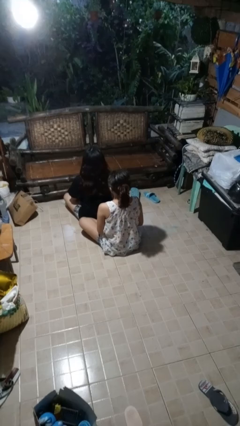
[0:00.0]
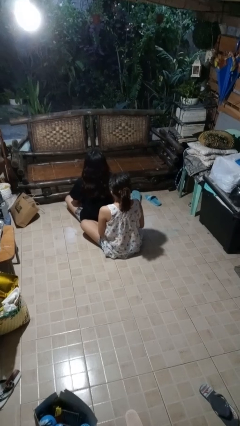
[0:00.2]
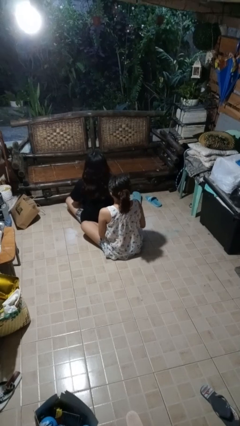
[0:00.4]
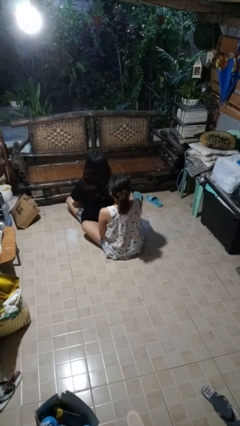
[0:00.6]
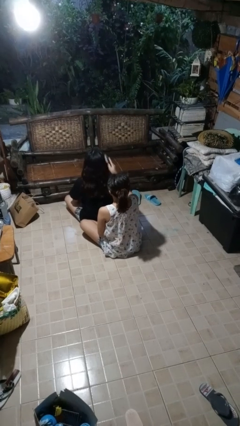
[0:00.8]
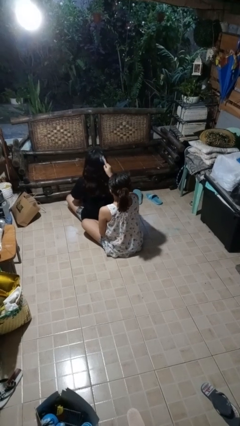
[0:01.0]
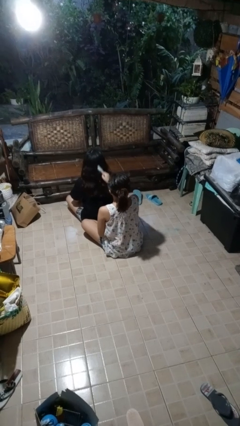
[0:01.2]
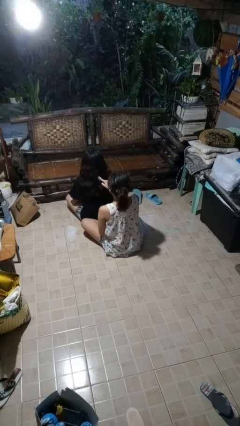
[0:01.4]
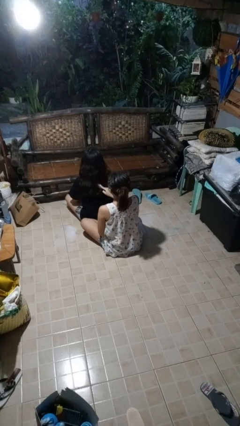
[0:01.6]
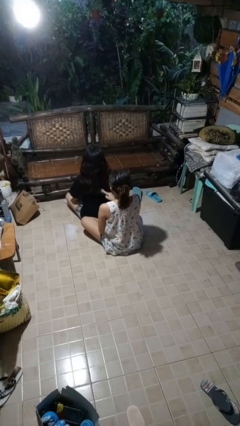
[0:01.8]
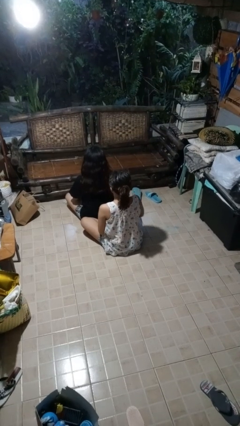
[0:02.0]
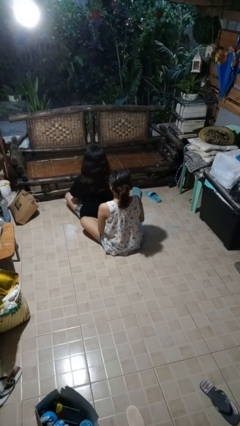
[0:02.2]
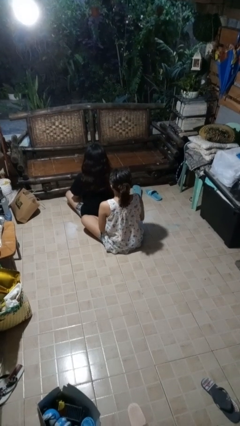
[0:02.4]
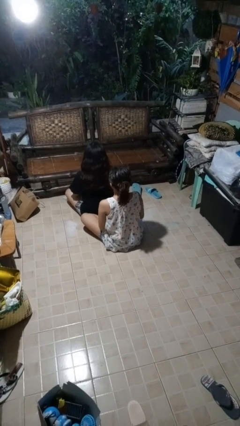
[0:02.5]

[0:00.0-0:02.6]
person brushes hair of person

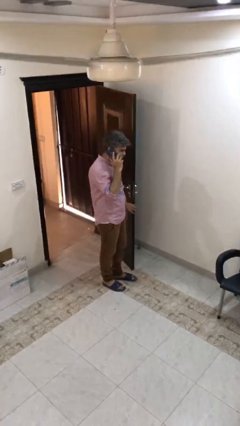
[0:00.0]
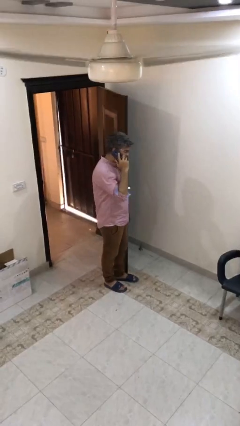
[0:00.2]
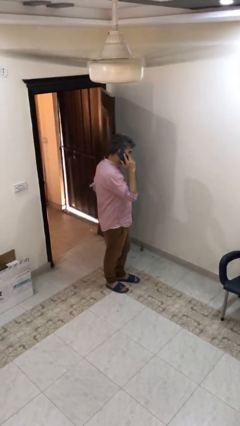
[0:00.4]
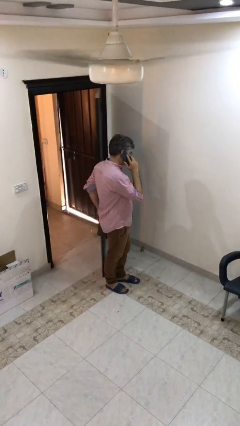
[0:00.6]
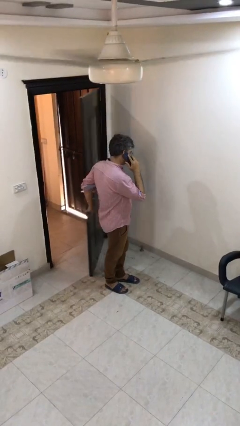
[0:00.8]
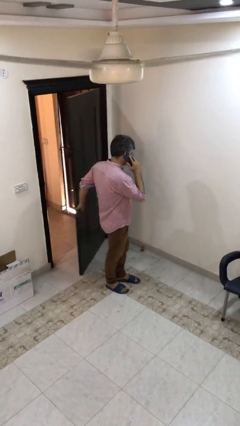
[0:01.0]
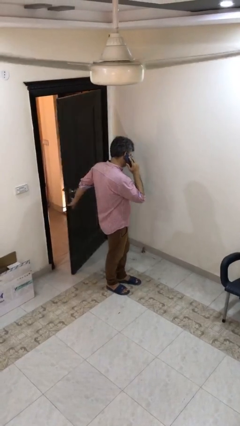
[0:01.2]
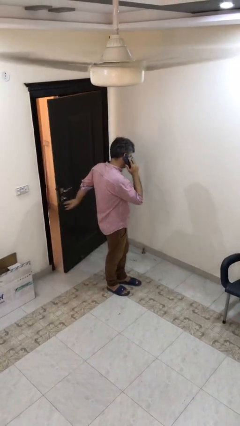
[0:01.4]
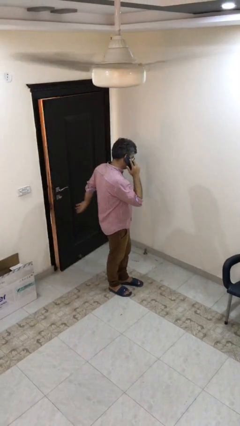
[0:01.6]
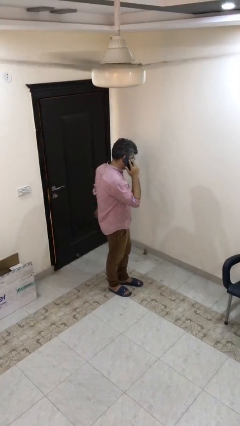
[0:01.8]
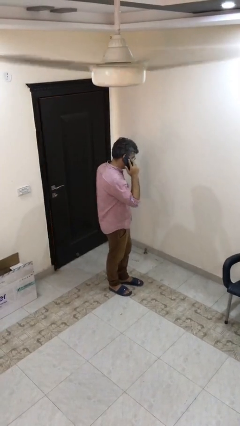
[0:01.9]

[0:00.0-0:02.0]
person closes facility door

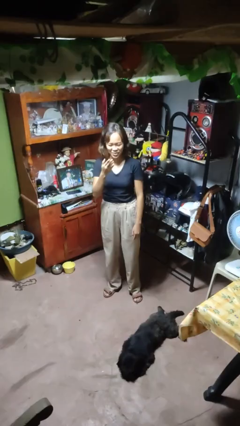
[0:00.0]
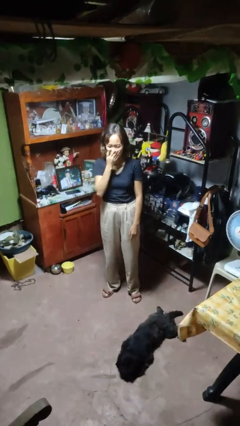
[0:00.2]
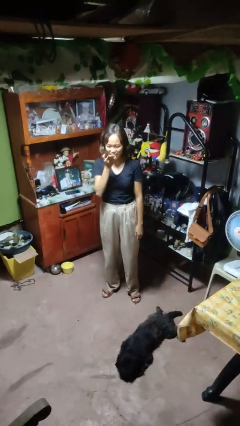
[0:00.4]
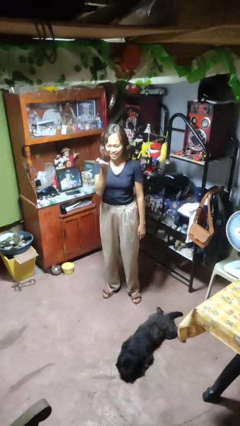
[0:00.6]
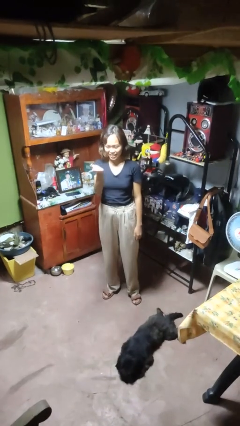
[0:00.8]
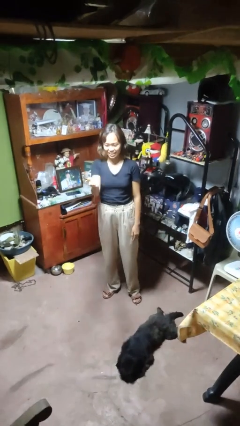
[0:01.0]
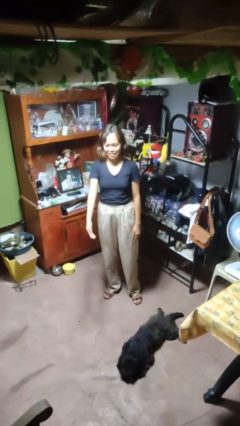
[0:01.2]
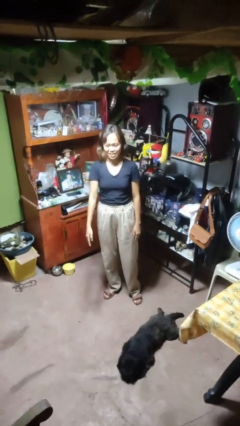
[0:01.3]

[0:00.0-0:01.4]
person gestures blow kiss

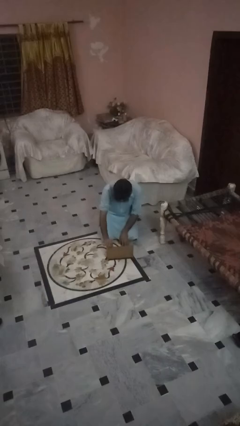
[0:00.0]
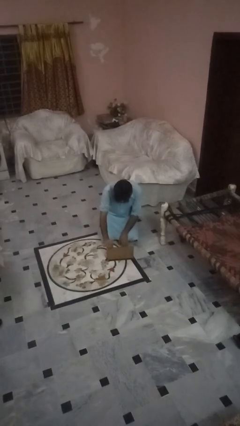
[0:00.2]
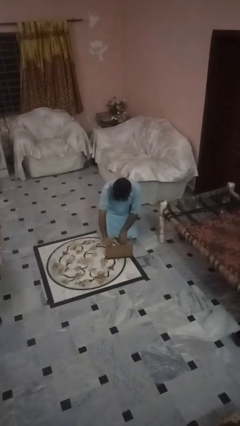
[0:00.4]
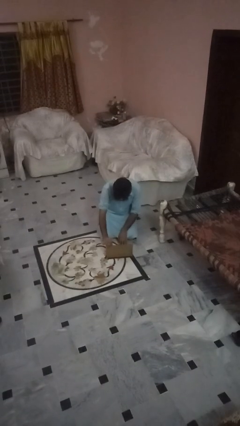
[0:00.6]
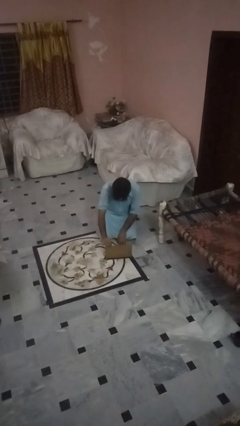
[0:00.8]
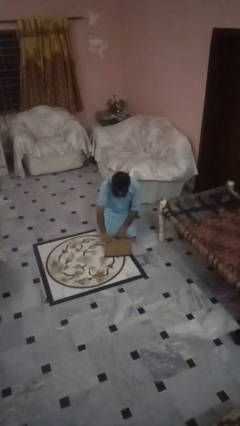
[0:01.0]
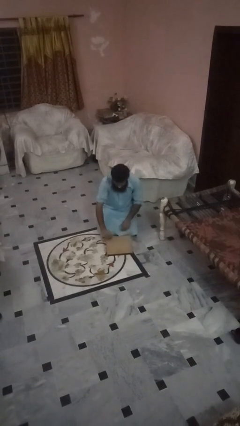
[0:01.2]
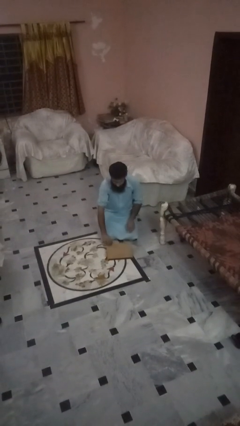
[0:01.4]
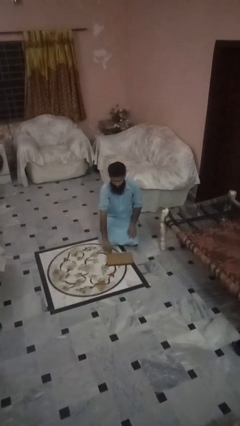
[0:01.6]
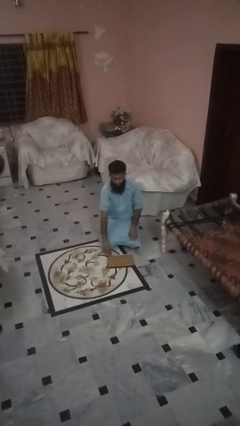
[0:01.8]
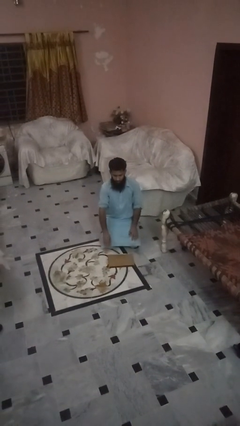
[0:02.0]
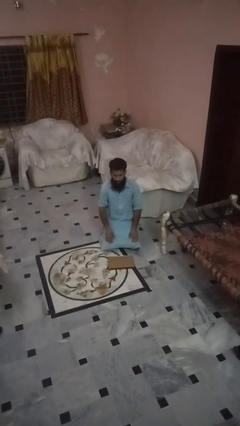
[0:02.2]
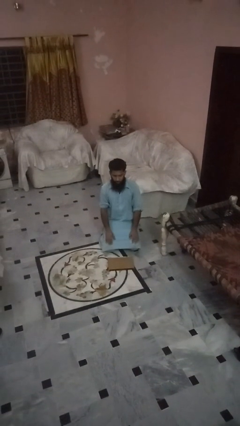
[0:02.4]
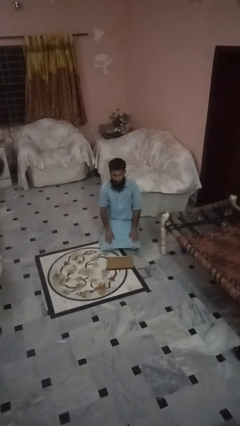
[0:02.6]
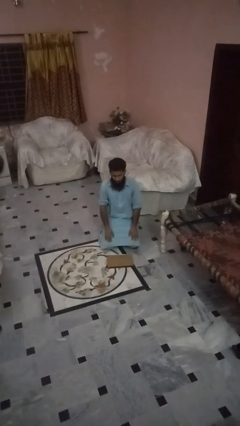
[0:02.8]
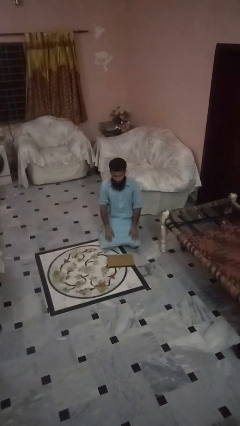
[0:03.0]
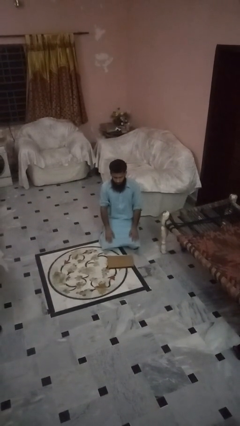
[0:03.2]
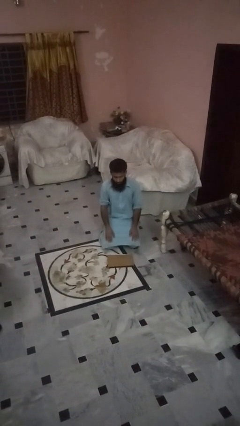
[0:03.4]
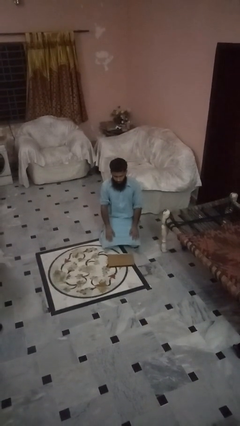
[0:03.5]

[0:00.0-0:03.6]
person closes laptop

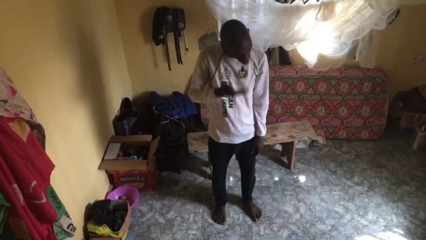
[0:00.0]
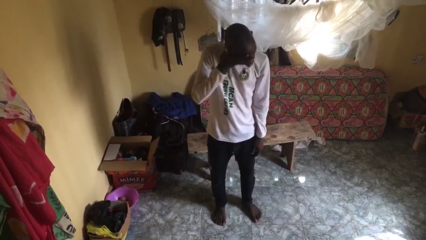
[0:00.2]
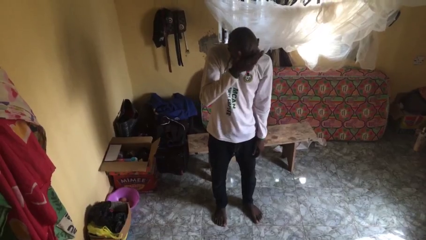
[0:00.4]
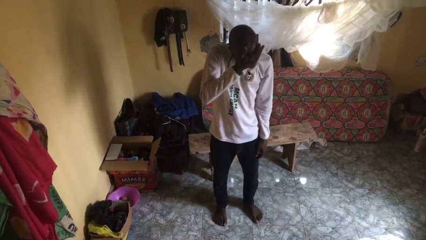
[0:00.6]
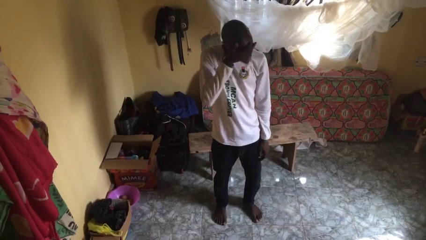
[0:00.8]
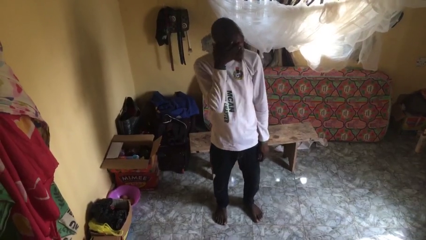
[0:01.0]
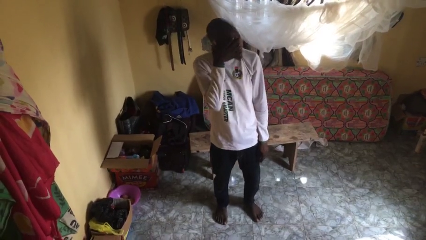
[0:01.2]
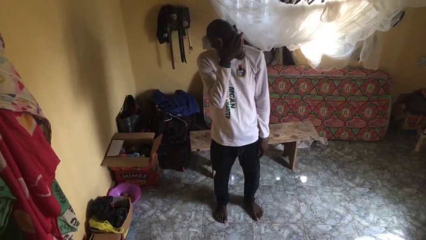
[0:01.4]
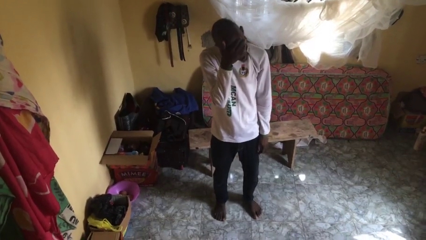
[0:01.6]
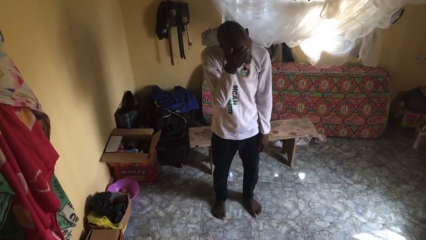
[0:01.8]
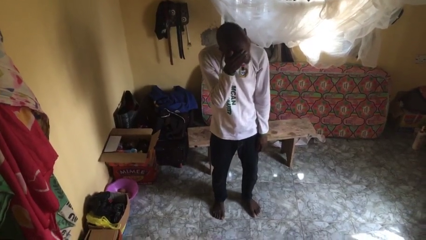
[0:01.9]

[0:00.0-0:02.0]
person rubs eyes

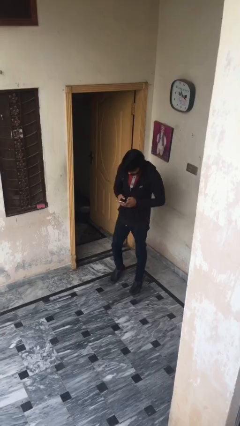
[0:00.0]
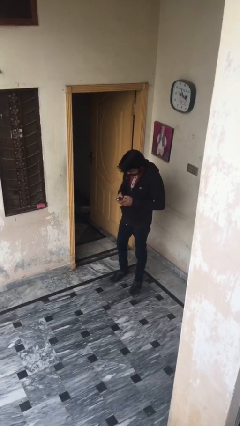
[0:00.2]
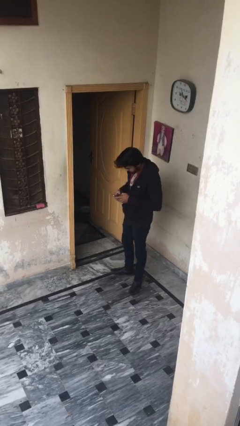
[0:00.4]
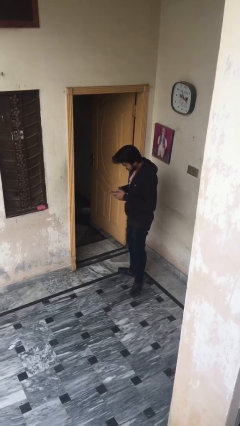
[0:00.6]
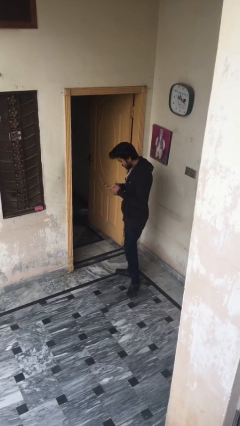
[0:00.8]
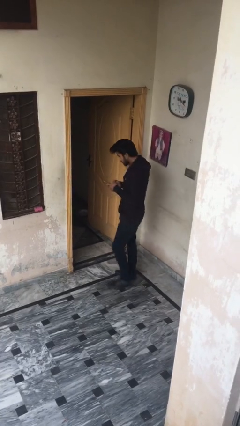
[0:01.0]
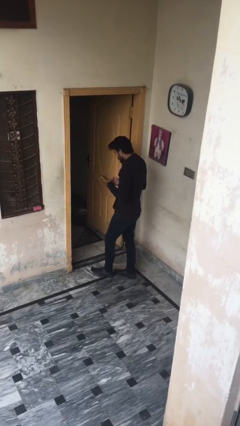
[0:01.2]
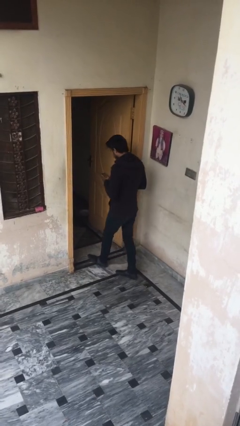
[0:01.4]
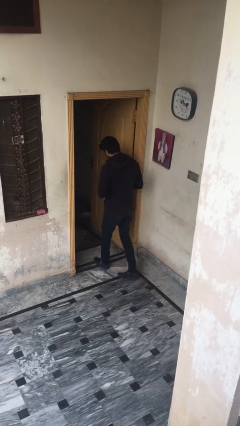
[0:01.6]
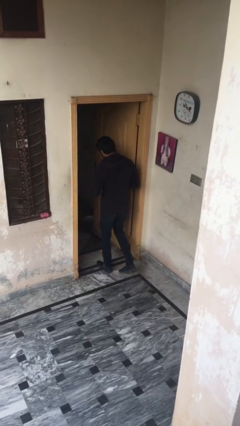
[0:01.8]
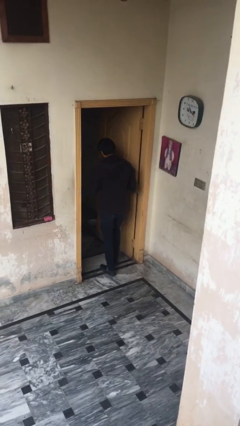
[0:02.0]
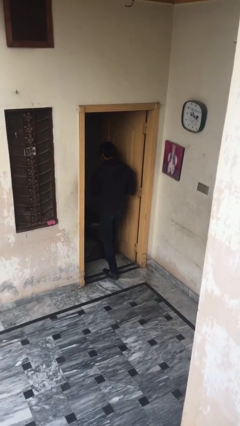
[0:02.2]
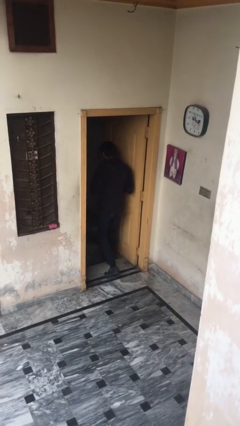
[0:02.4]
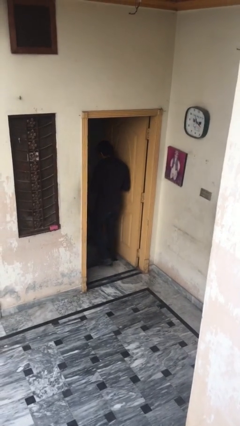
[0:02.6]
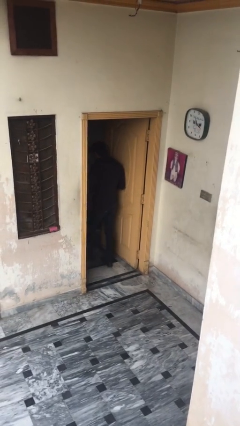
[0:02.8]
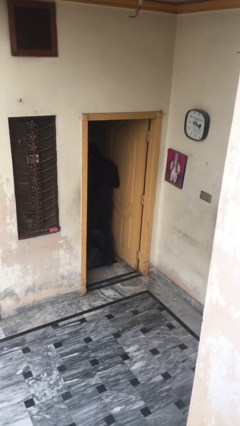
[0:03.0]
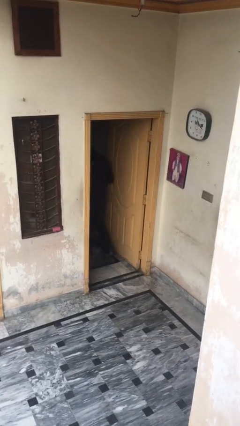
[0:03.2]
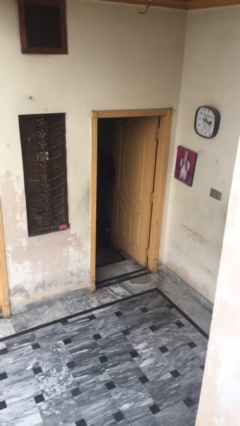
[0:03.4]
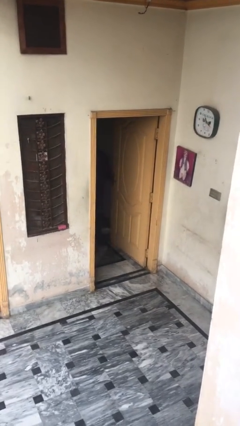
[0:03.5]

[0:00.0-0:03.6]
person exits scene through structure

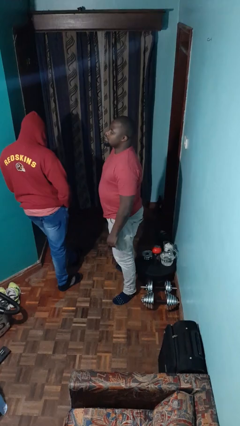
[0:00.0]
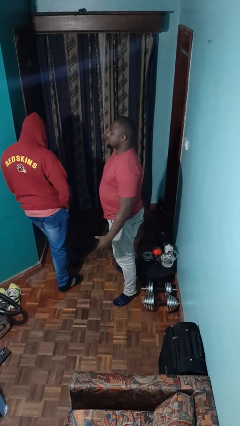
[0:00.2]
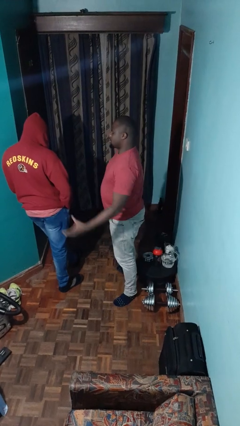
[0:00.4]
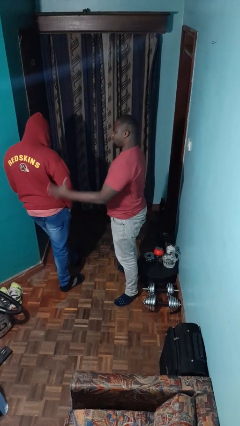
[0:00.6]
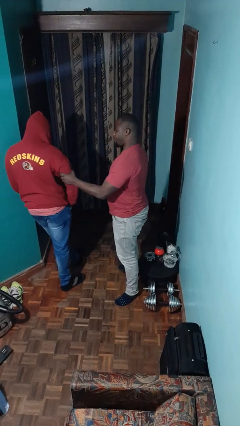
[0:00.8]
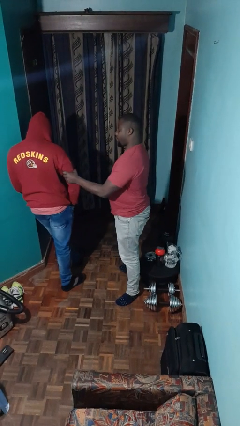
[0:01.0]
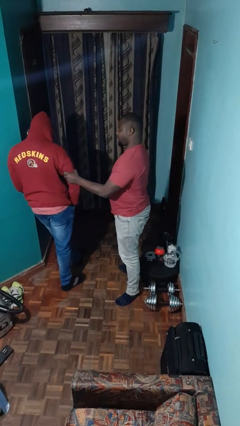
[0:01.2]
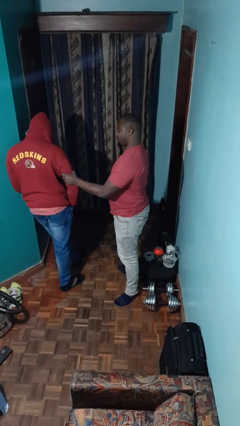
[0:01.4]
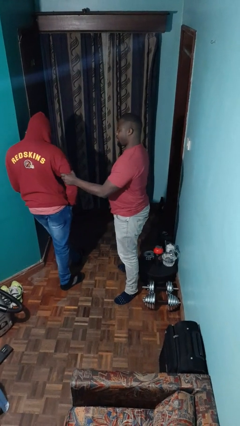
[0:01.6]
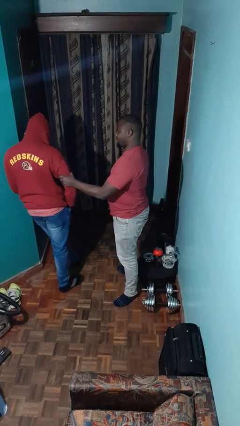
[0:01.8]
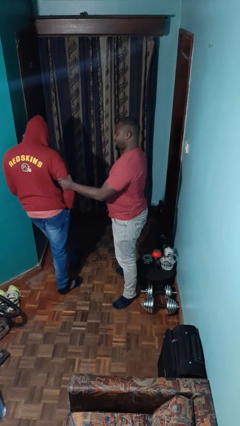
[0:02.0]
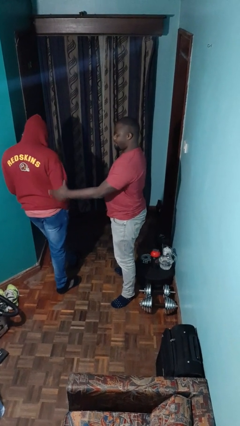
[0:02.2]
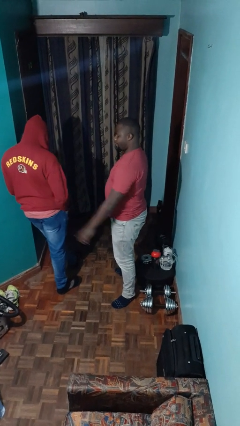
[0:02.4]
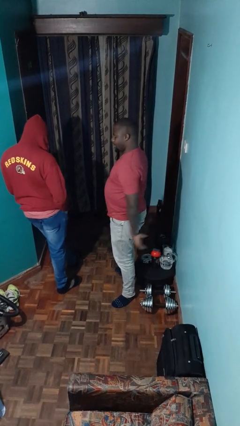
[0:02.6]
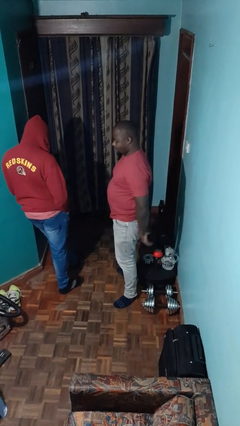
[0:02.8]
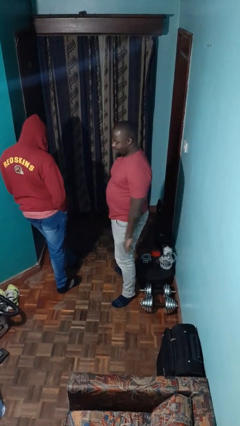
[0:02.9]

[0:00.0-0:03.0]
person grabs person by bicep
